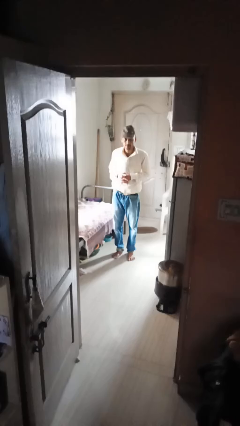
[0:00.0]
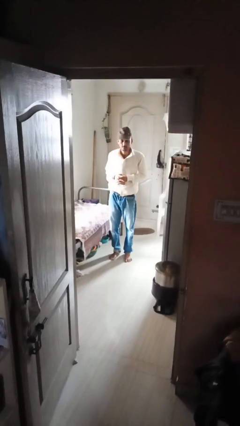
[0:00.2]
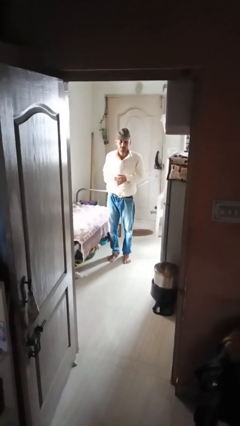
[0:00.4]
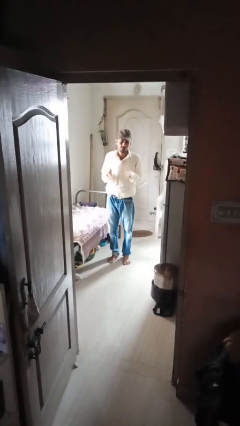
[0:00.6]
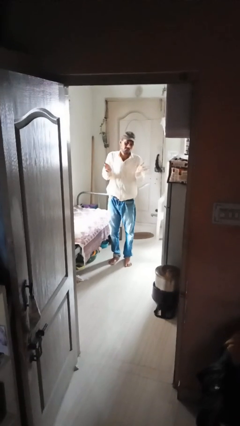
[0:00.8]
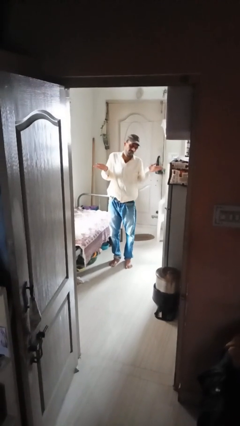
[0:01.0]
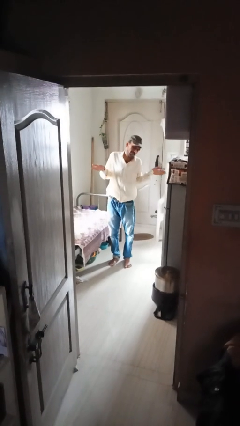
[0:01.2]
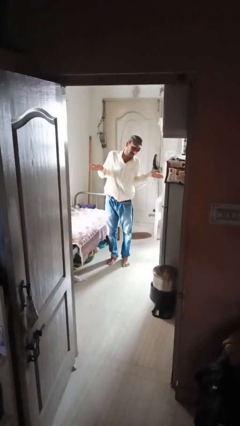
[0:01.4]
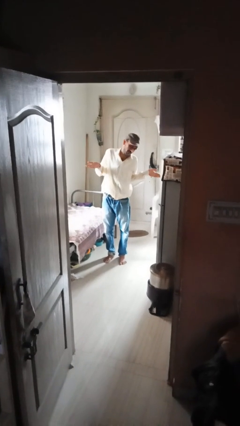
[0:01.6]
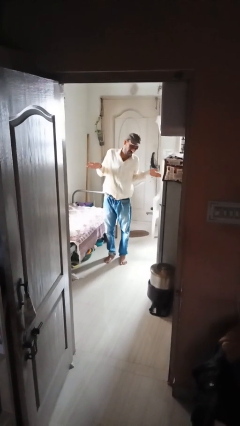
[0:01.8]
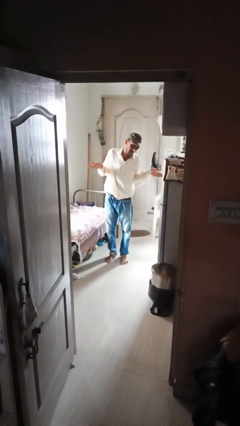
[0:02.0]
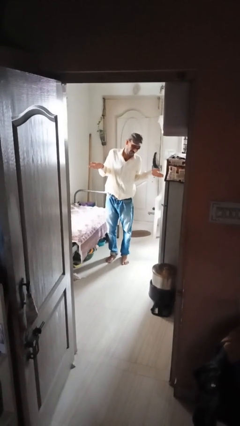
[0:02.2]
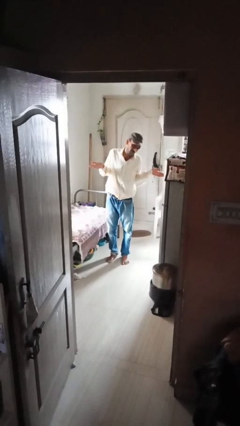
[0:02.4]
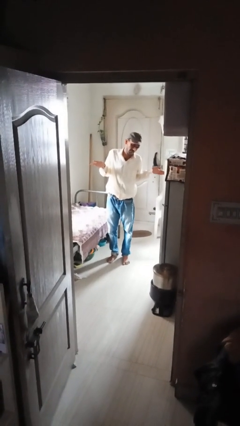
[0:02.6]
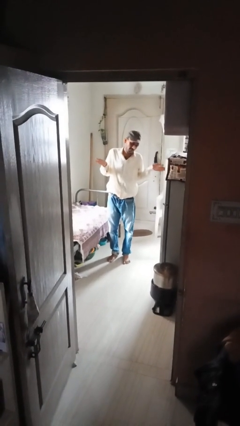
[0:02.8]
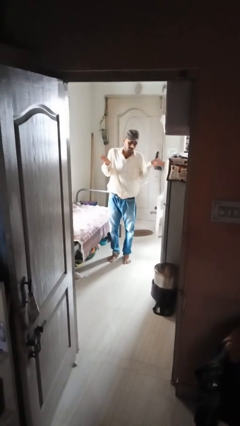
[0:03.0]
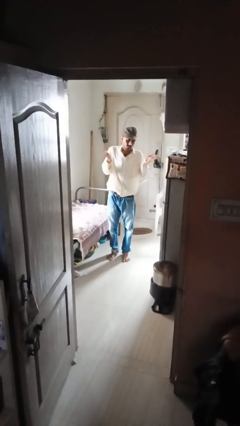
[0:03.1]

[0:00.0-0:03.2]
person shrugs

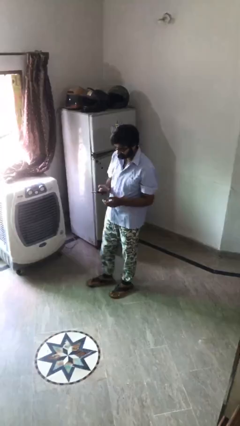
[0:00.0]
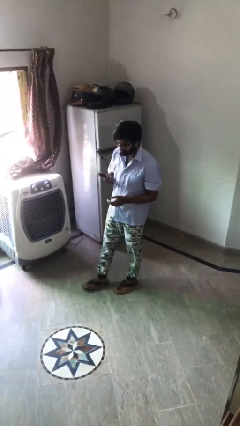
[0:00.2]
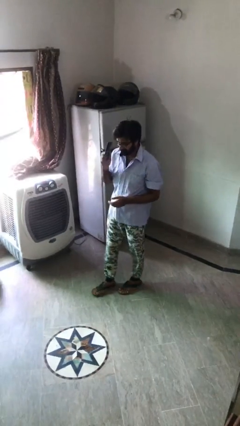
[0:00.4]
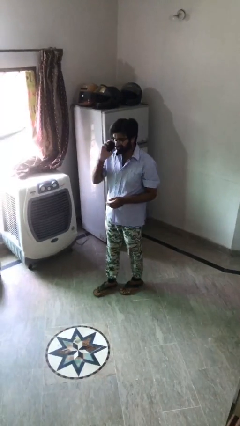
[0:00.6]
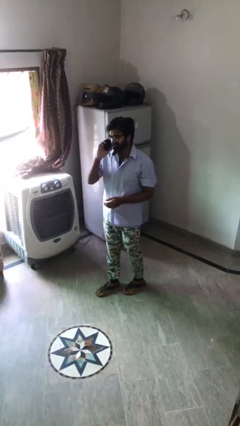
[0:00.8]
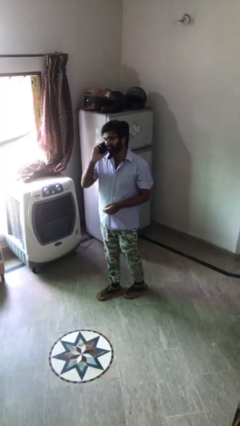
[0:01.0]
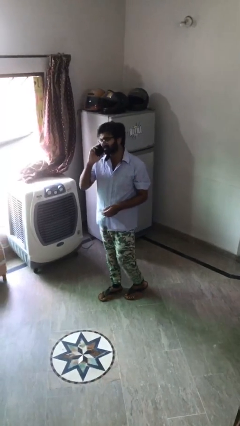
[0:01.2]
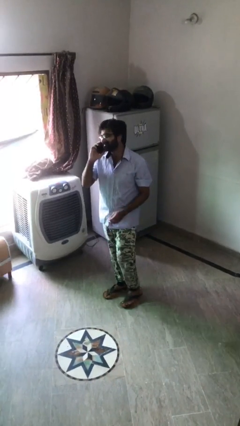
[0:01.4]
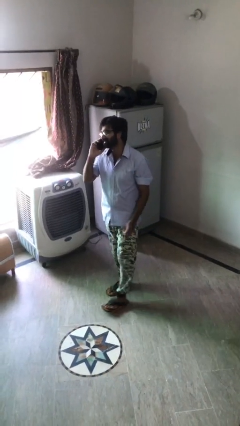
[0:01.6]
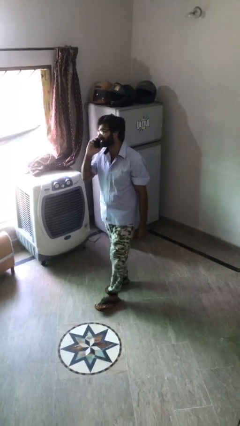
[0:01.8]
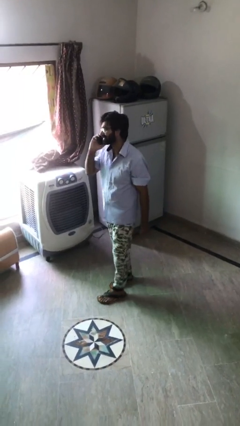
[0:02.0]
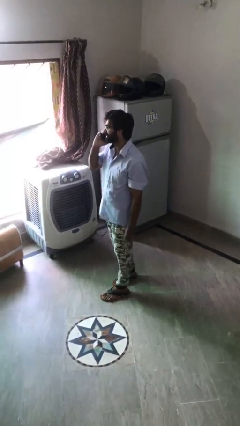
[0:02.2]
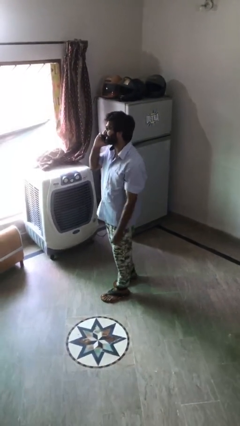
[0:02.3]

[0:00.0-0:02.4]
person talks on phone

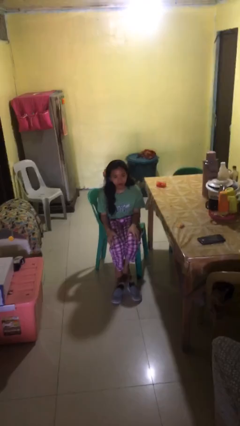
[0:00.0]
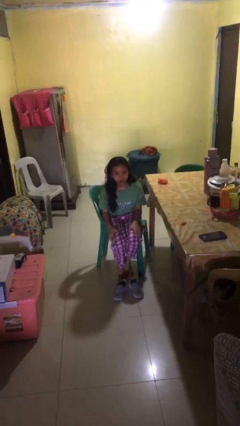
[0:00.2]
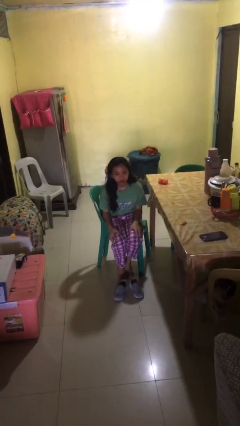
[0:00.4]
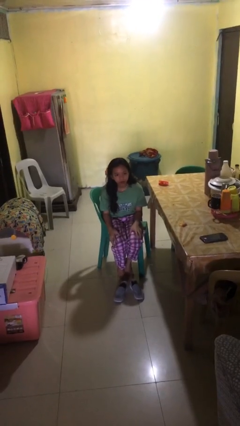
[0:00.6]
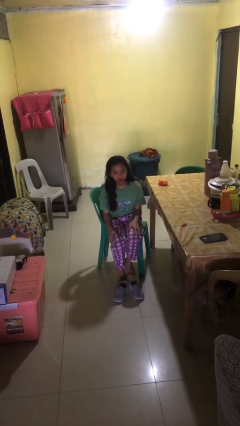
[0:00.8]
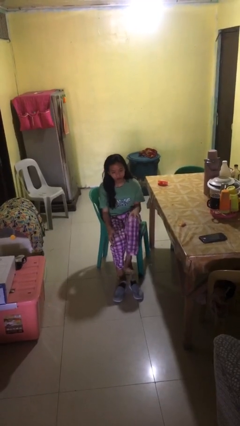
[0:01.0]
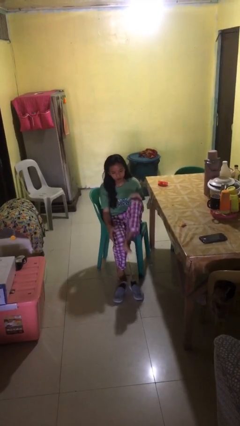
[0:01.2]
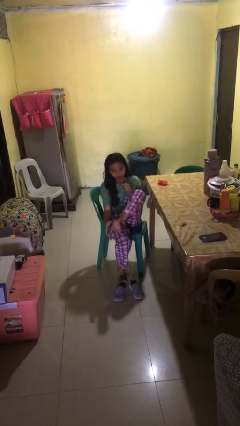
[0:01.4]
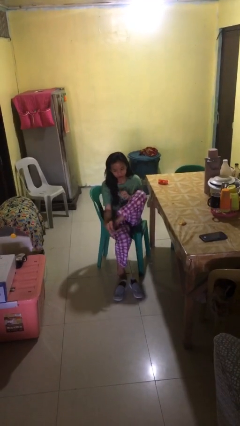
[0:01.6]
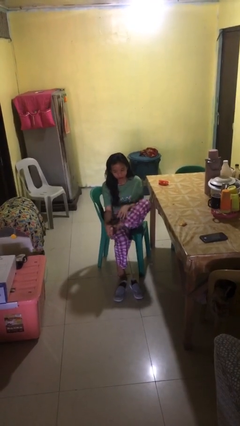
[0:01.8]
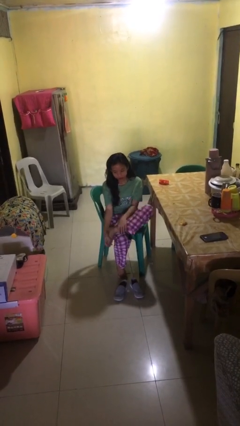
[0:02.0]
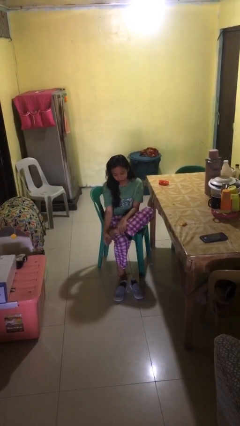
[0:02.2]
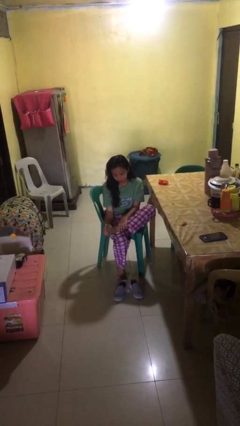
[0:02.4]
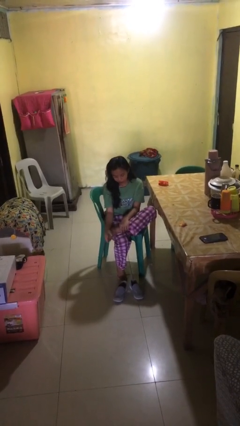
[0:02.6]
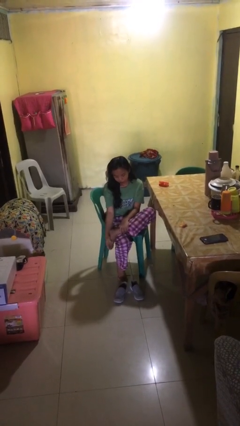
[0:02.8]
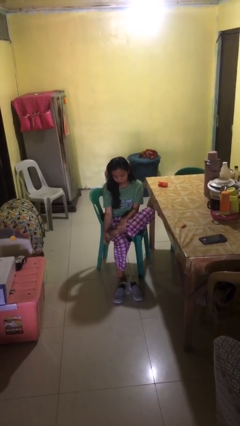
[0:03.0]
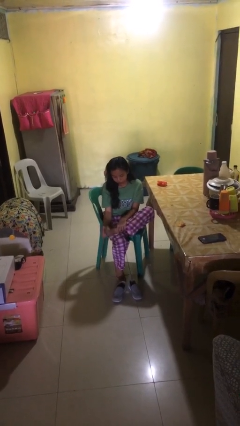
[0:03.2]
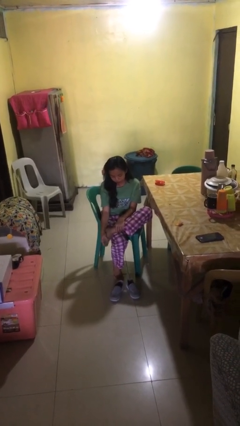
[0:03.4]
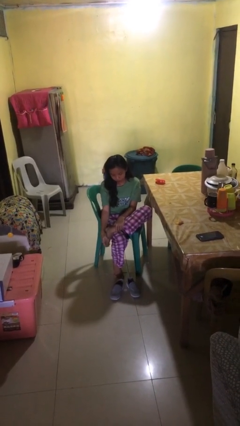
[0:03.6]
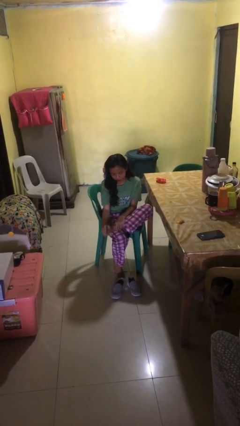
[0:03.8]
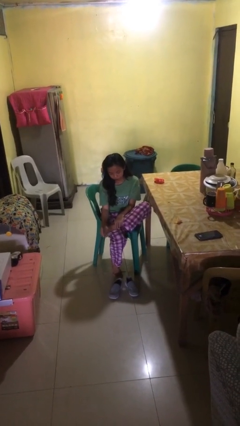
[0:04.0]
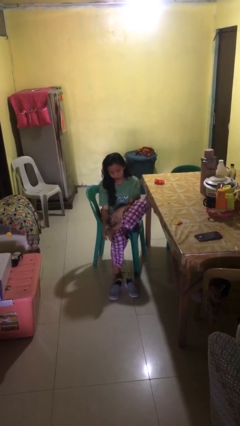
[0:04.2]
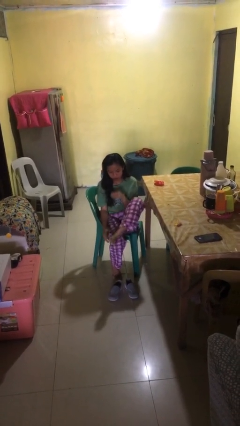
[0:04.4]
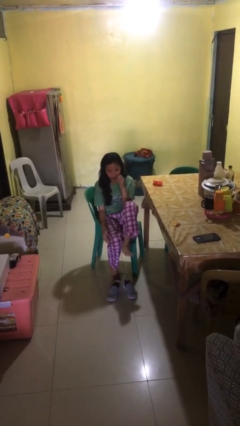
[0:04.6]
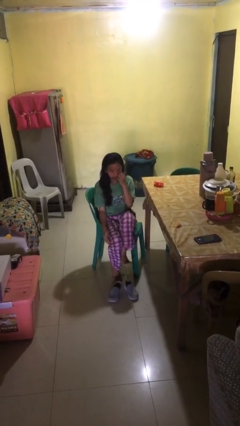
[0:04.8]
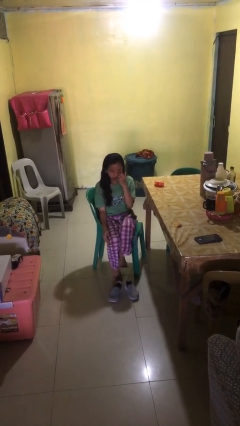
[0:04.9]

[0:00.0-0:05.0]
person rubs foot

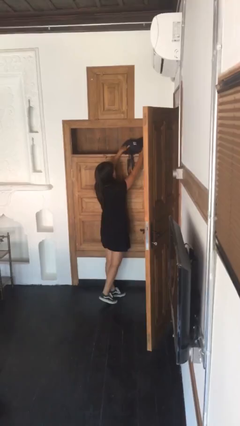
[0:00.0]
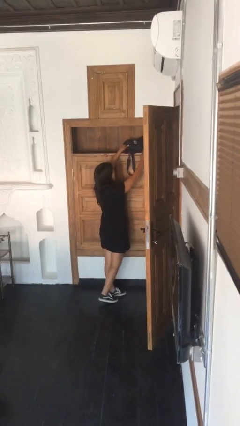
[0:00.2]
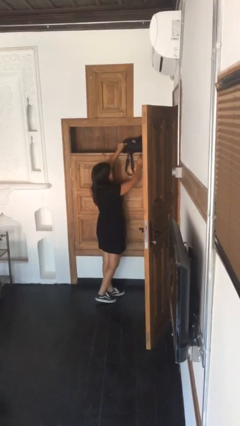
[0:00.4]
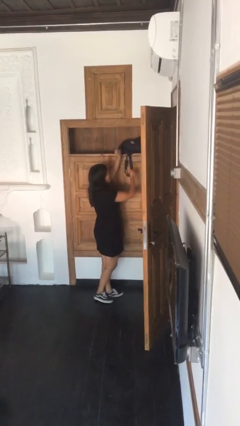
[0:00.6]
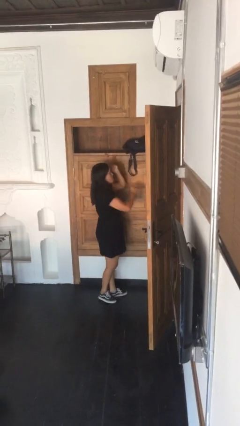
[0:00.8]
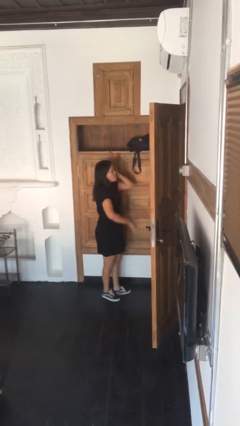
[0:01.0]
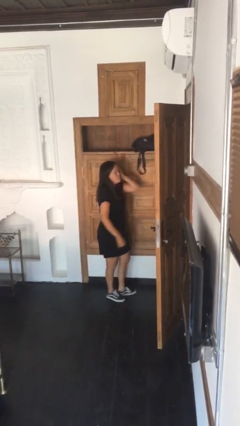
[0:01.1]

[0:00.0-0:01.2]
person puts down object on shelf

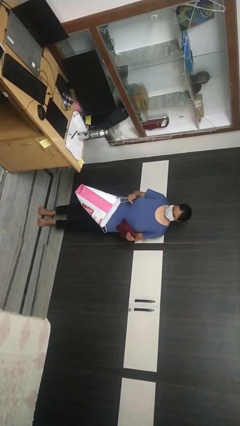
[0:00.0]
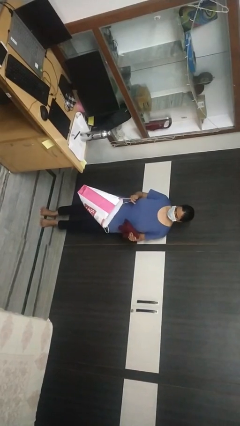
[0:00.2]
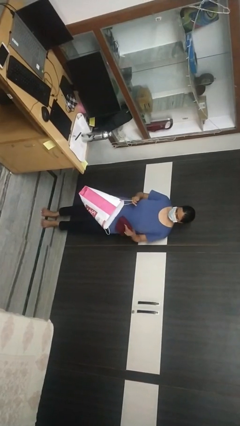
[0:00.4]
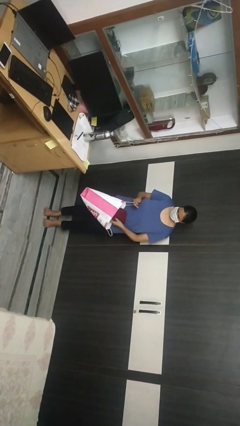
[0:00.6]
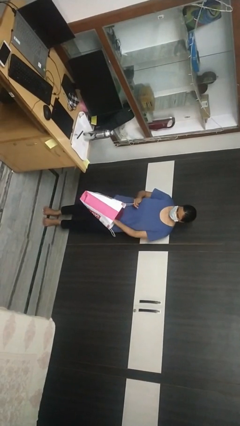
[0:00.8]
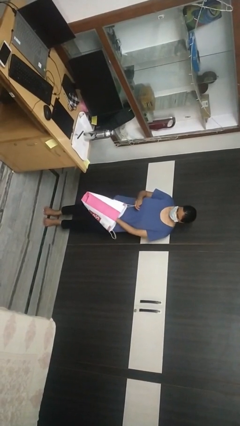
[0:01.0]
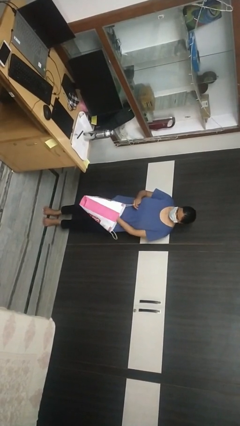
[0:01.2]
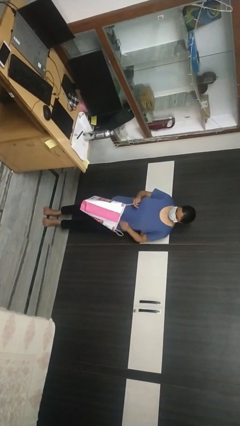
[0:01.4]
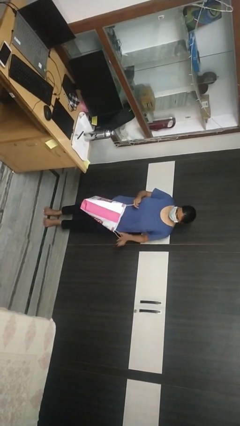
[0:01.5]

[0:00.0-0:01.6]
person puts object into bag

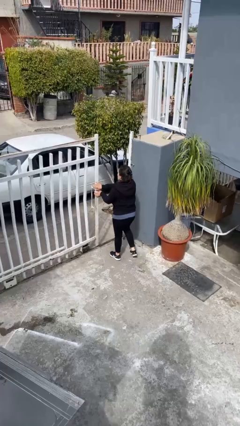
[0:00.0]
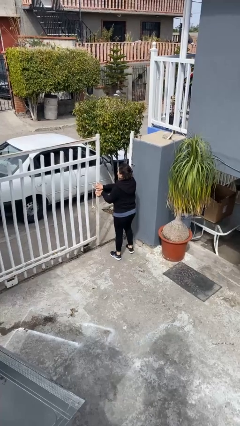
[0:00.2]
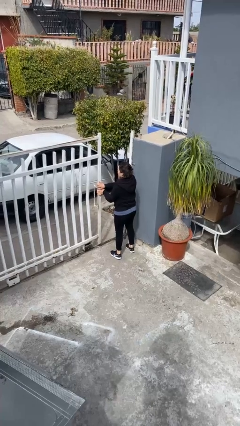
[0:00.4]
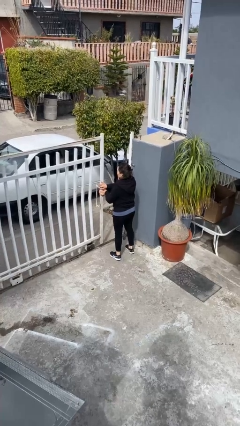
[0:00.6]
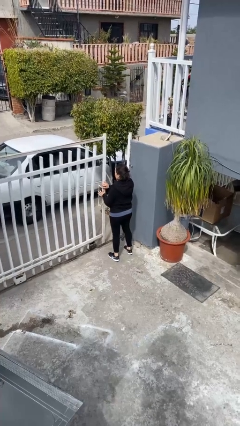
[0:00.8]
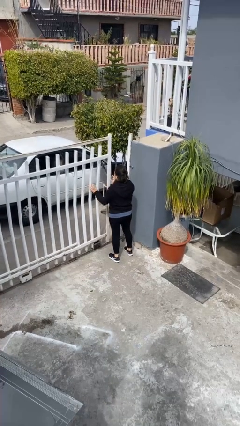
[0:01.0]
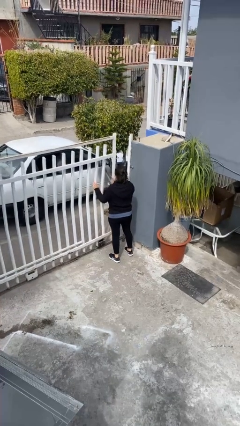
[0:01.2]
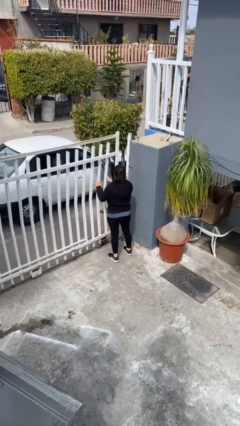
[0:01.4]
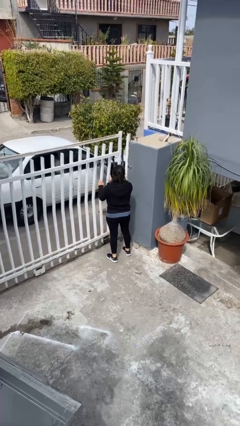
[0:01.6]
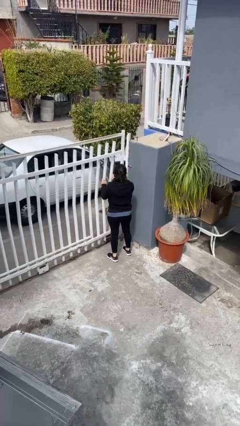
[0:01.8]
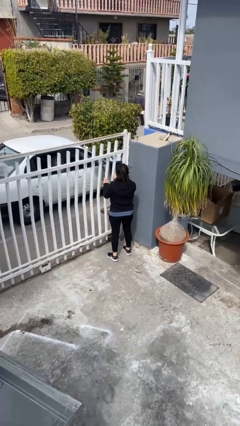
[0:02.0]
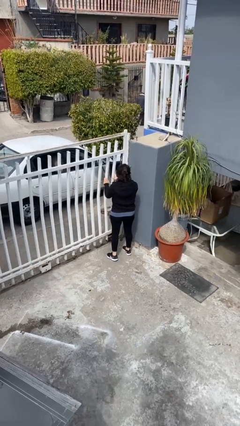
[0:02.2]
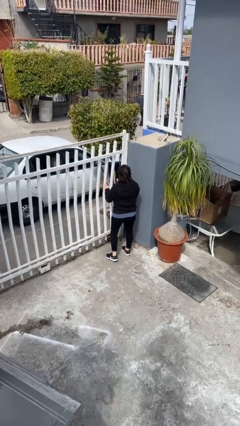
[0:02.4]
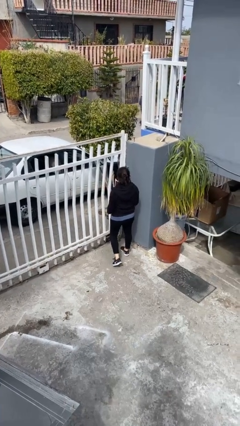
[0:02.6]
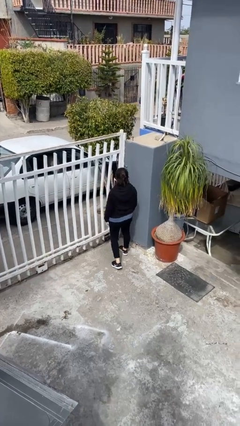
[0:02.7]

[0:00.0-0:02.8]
person closes facility door

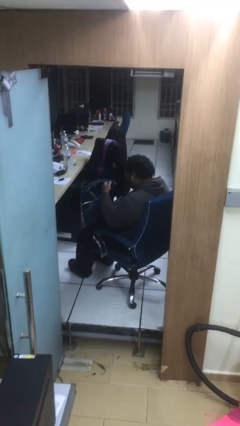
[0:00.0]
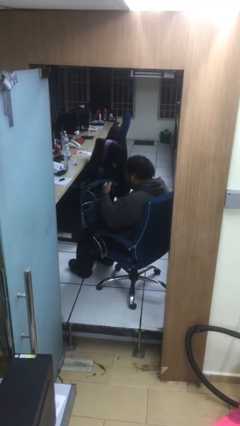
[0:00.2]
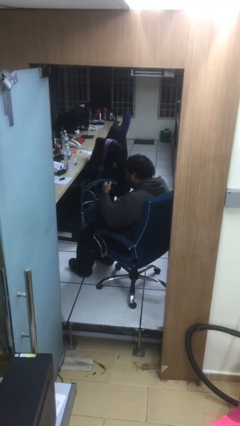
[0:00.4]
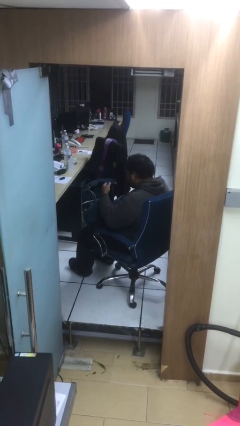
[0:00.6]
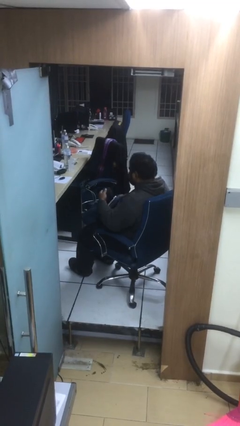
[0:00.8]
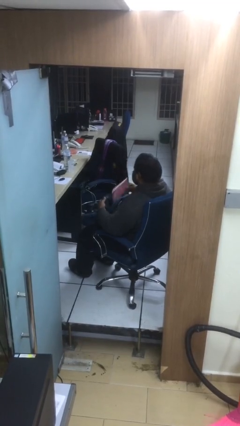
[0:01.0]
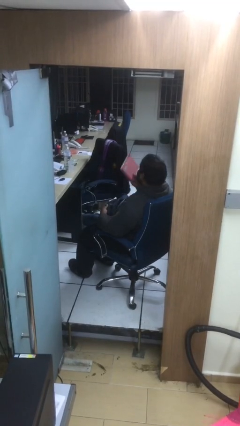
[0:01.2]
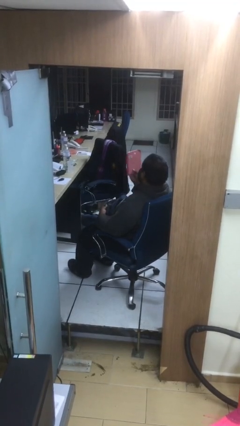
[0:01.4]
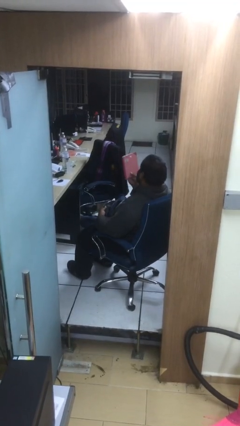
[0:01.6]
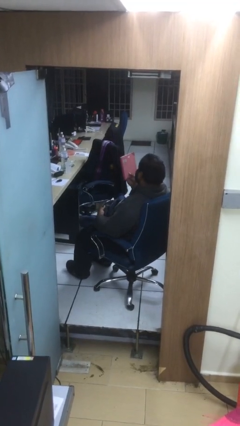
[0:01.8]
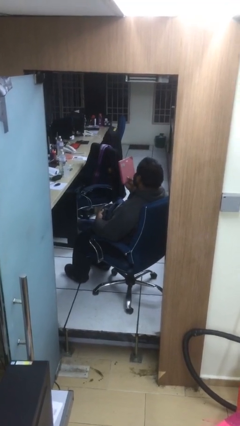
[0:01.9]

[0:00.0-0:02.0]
person takes object from backpack
